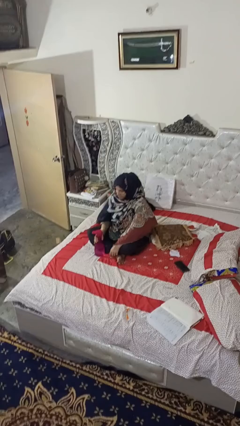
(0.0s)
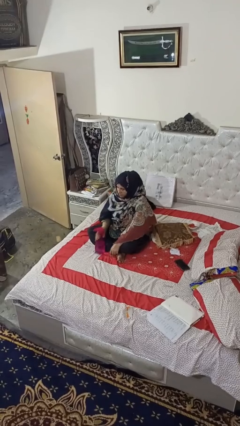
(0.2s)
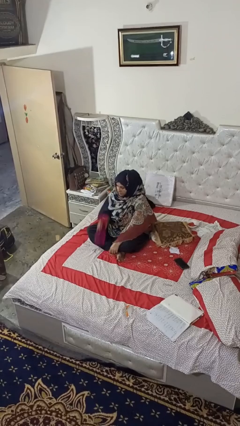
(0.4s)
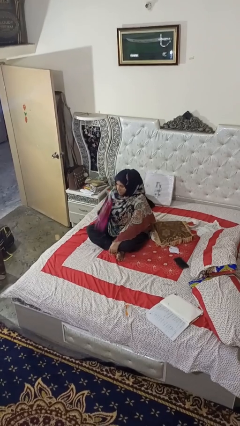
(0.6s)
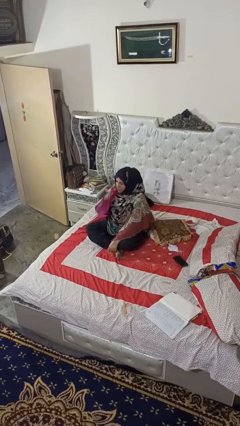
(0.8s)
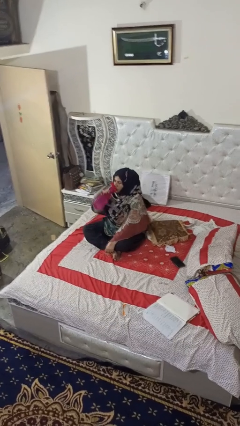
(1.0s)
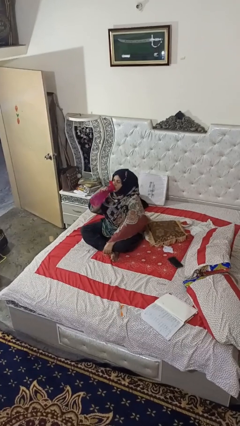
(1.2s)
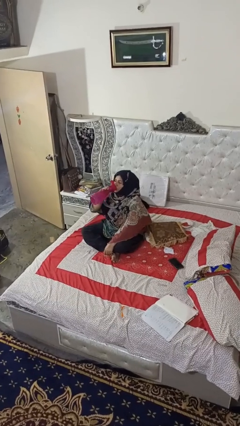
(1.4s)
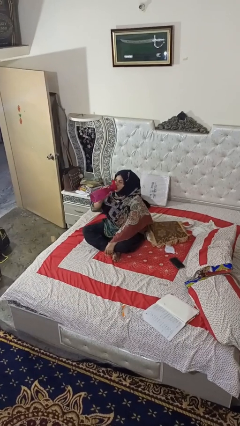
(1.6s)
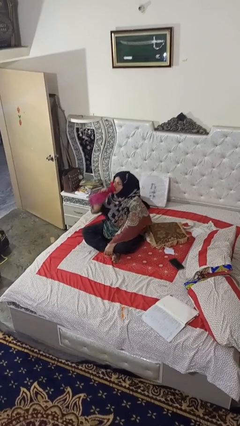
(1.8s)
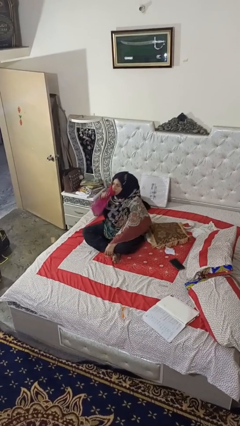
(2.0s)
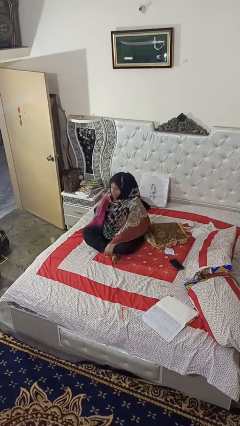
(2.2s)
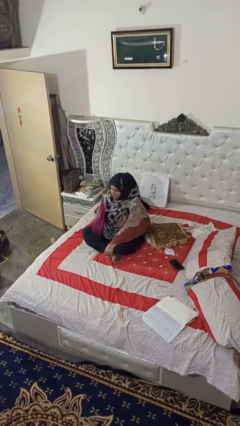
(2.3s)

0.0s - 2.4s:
person drinks from bottle

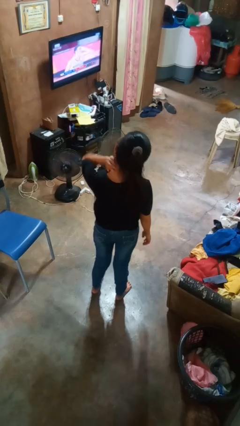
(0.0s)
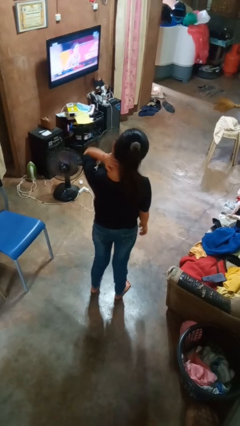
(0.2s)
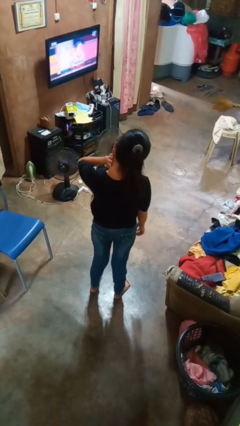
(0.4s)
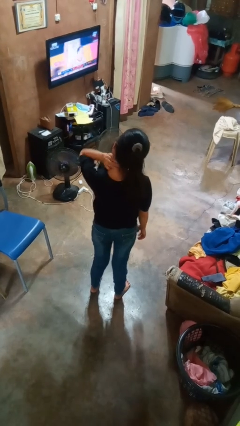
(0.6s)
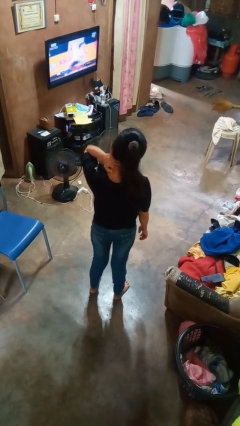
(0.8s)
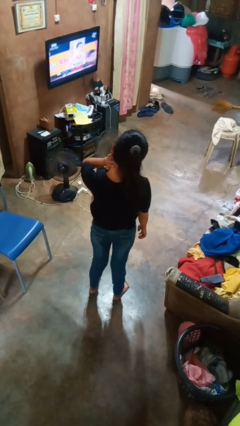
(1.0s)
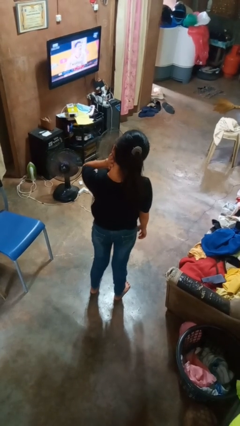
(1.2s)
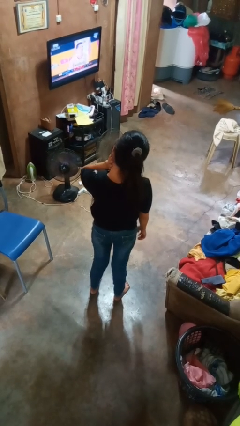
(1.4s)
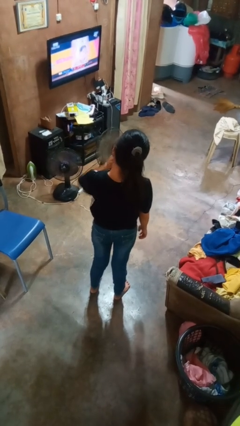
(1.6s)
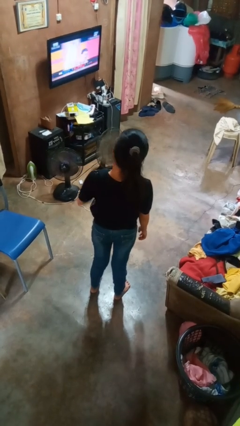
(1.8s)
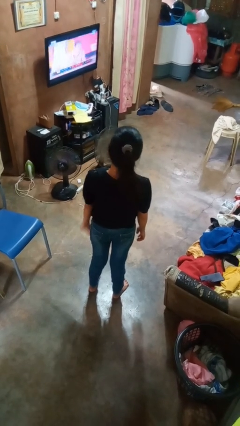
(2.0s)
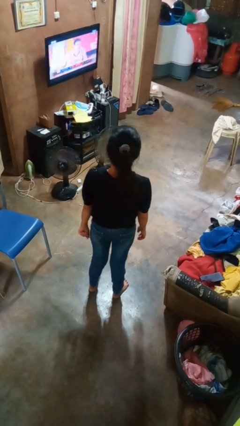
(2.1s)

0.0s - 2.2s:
person rubs neck

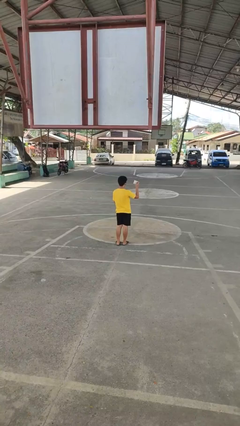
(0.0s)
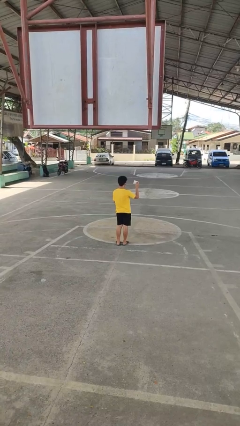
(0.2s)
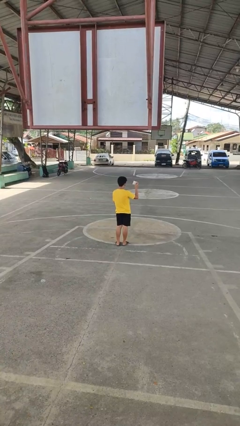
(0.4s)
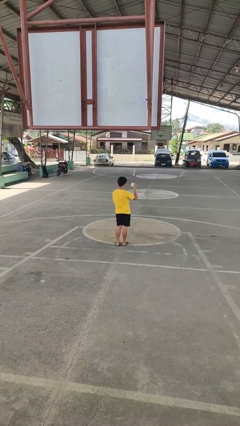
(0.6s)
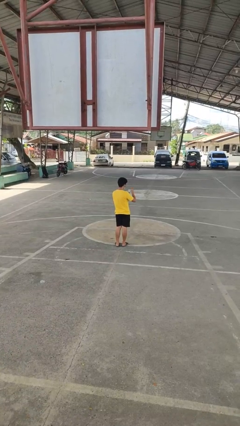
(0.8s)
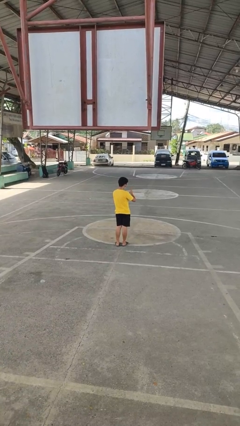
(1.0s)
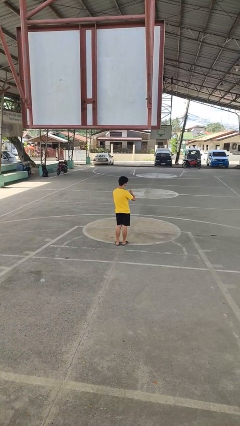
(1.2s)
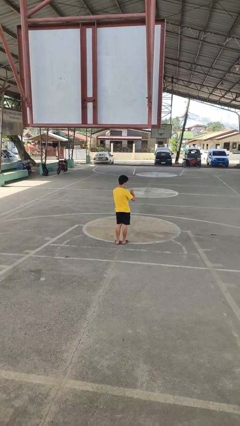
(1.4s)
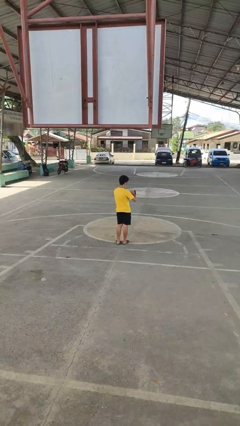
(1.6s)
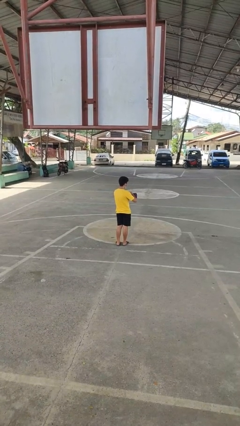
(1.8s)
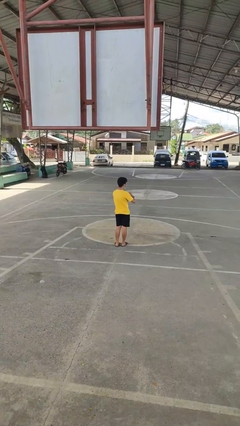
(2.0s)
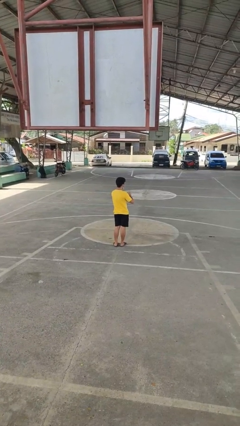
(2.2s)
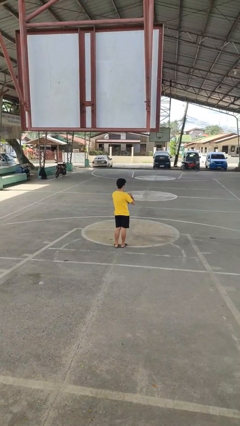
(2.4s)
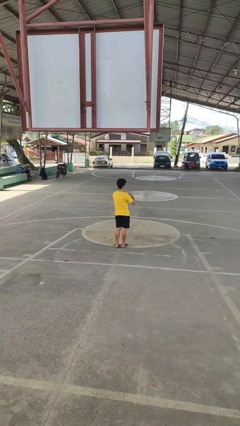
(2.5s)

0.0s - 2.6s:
person puts object into purse

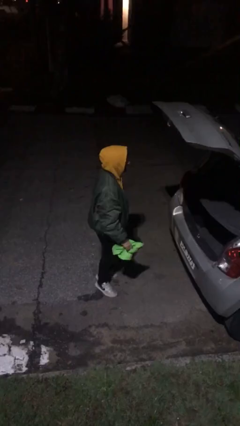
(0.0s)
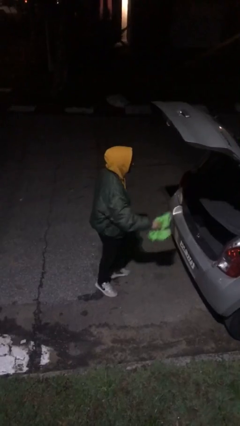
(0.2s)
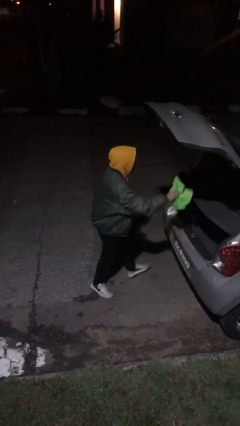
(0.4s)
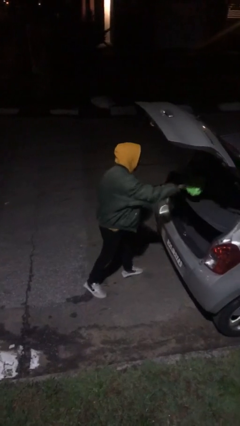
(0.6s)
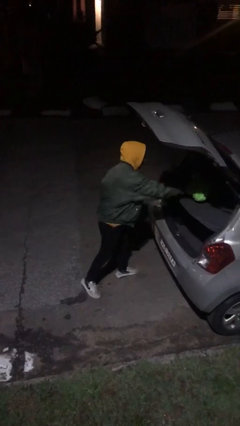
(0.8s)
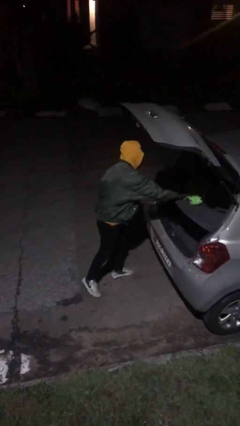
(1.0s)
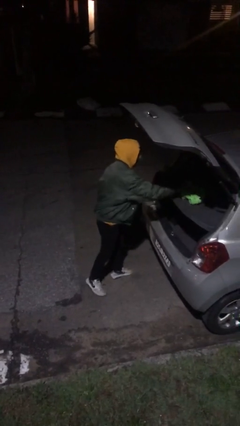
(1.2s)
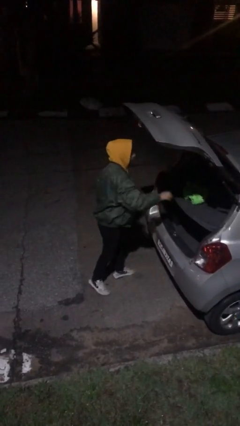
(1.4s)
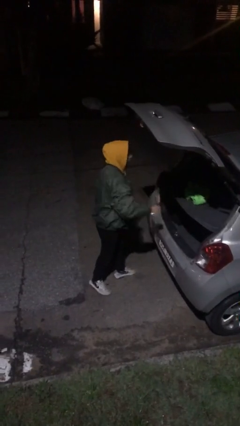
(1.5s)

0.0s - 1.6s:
person loads car

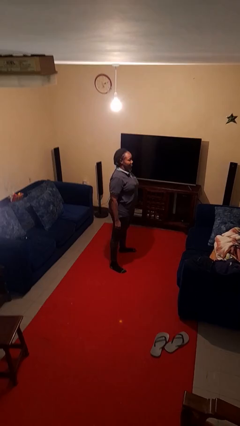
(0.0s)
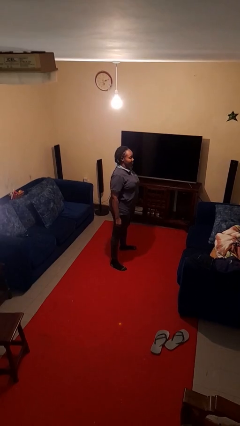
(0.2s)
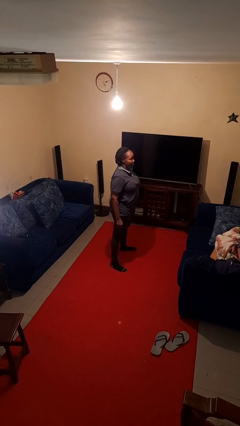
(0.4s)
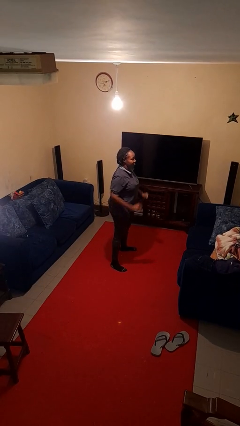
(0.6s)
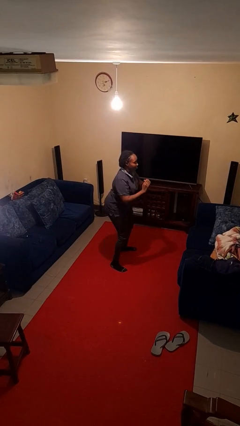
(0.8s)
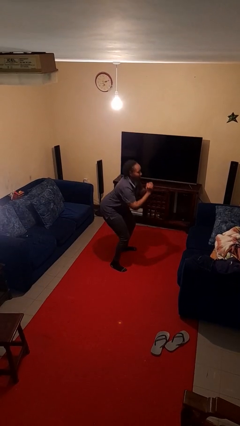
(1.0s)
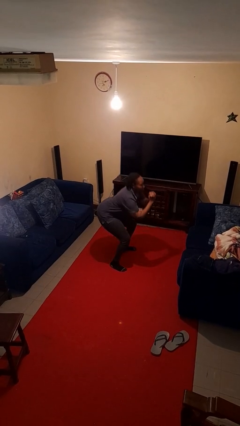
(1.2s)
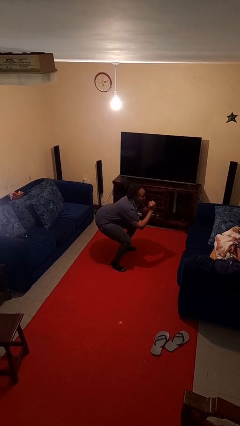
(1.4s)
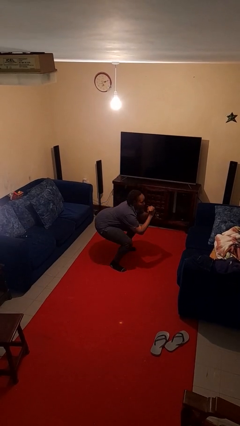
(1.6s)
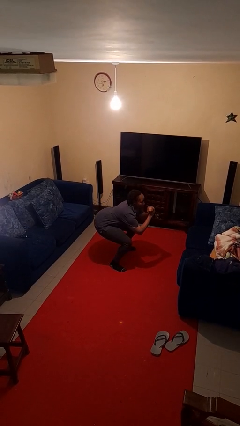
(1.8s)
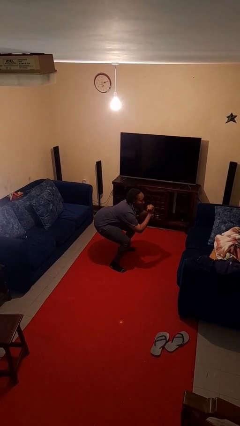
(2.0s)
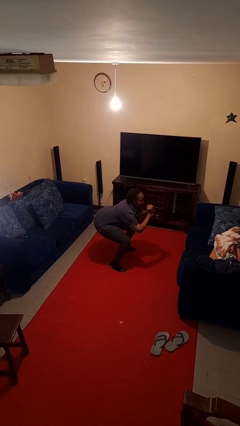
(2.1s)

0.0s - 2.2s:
person squats

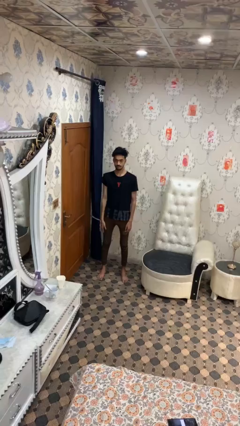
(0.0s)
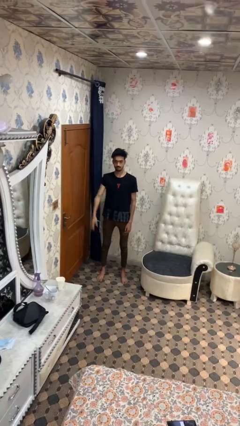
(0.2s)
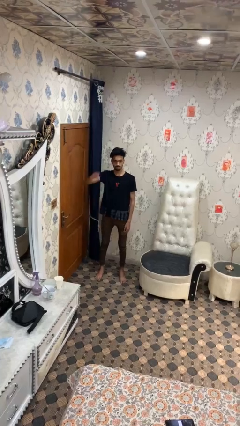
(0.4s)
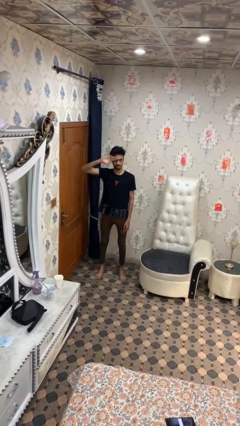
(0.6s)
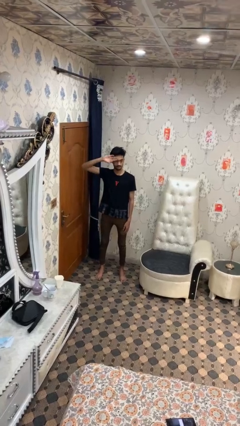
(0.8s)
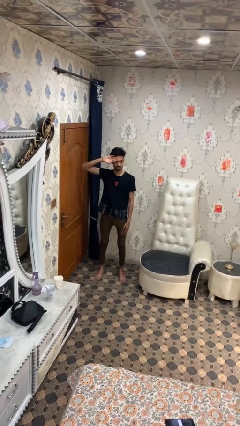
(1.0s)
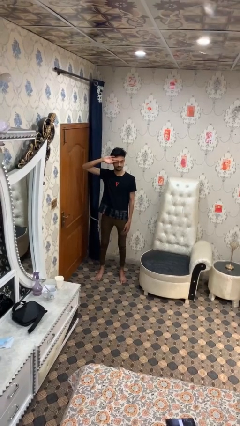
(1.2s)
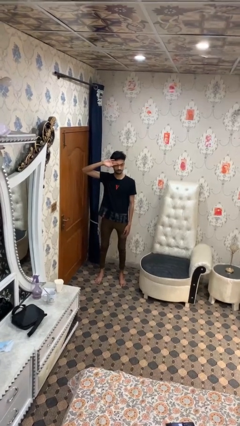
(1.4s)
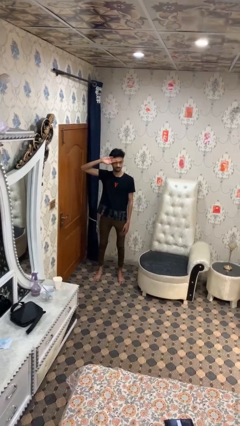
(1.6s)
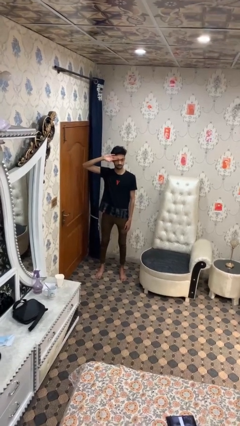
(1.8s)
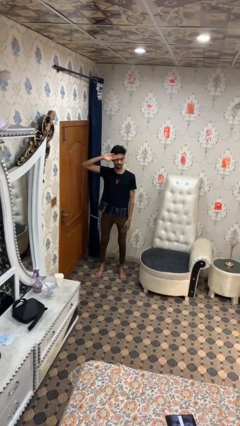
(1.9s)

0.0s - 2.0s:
person salutes

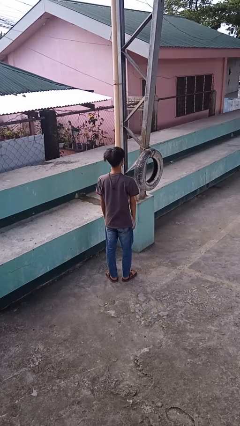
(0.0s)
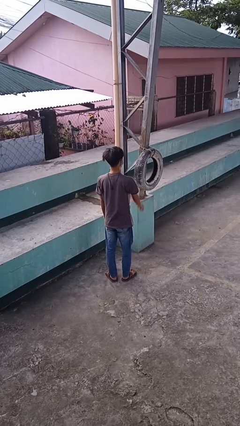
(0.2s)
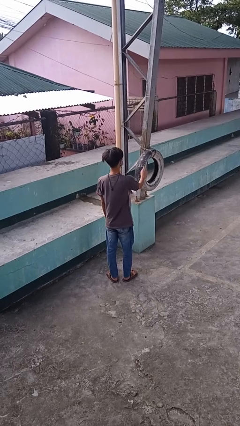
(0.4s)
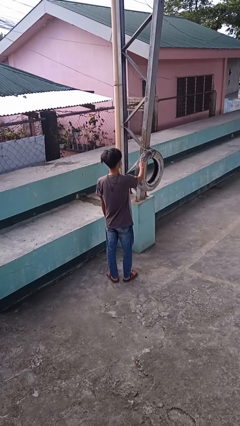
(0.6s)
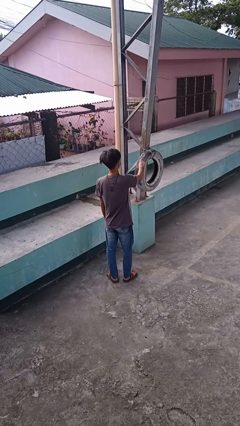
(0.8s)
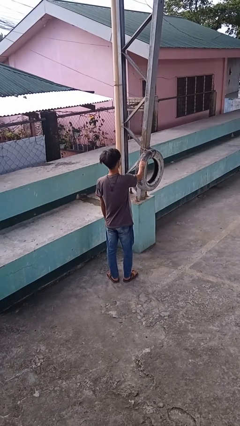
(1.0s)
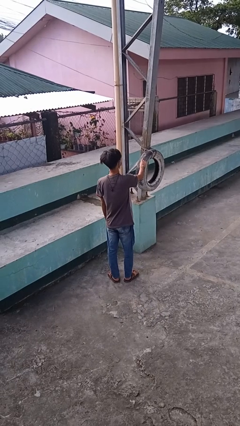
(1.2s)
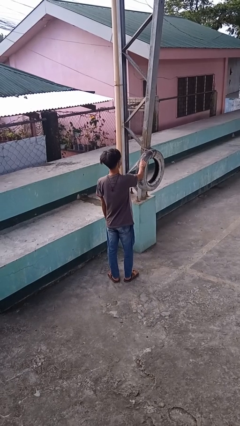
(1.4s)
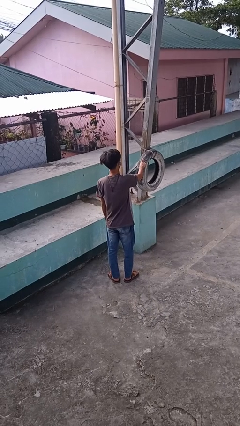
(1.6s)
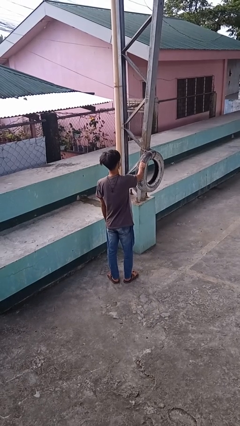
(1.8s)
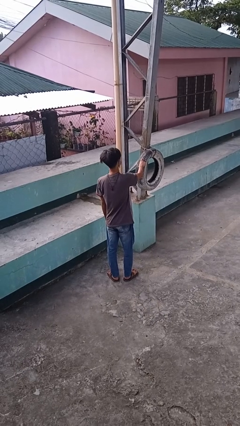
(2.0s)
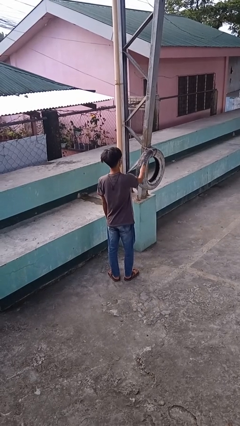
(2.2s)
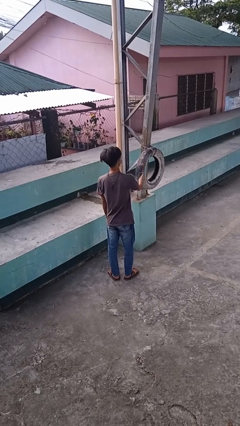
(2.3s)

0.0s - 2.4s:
person taps object with finger

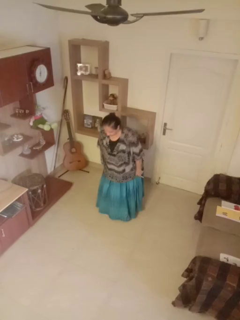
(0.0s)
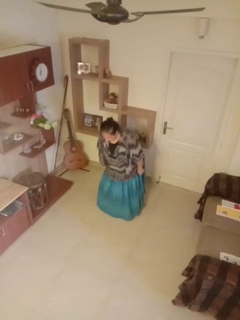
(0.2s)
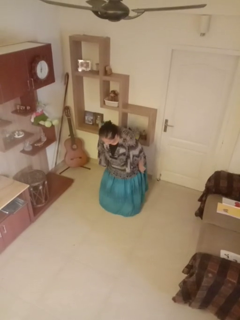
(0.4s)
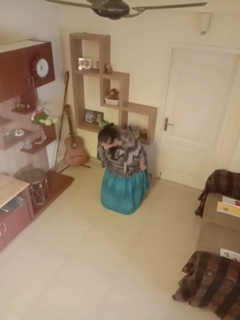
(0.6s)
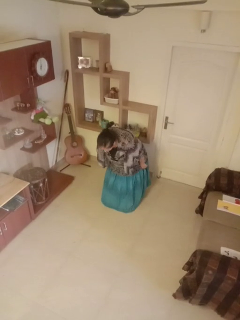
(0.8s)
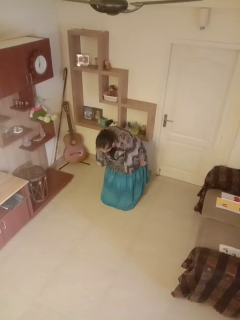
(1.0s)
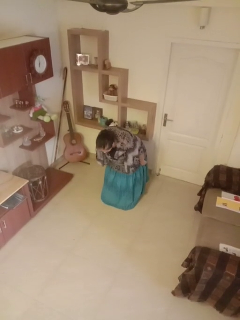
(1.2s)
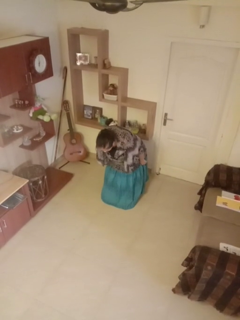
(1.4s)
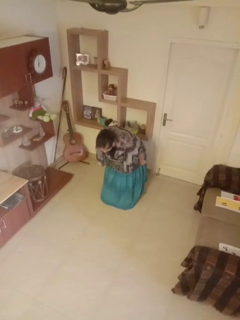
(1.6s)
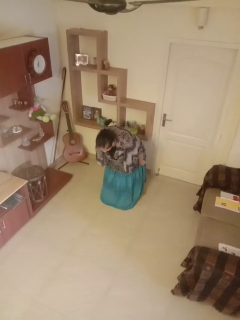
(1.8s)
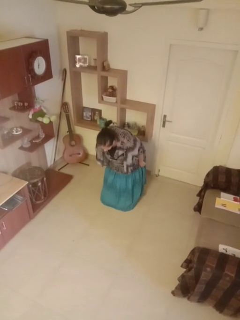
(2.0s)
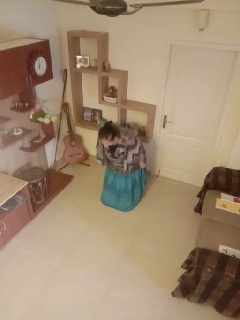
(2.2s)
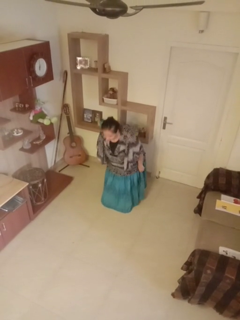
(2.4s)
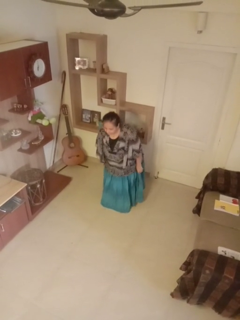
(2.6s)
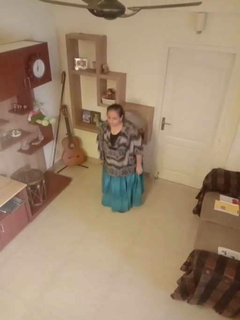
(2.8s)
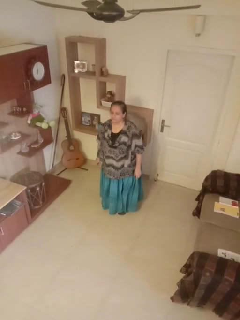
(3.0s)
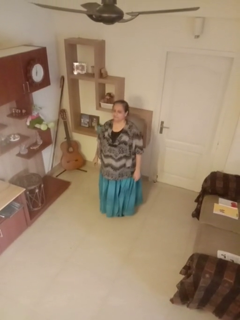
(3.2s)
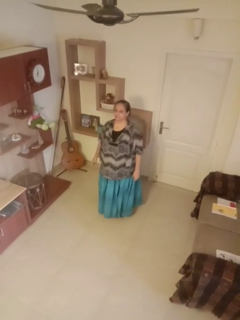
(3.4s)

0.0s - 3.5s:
person bows
